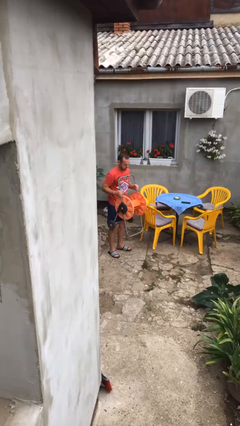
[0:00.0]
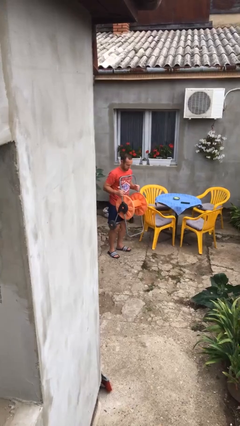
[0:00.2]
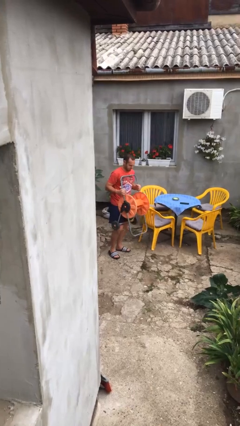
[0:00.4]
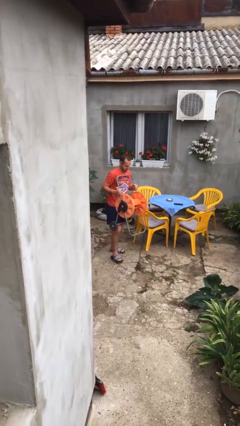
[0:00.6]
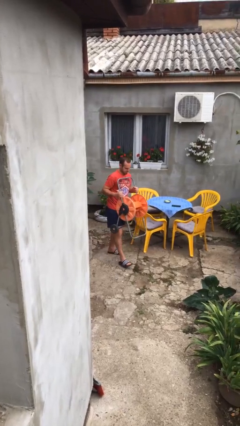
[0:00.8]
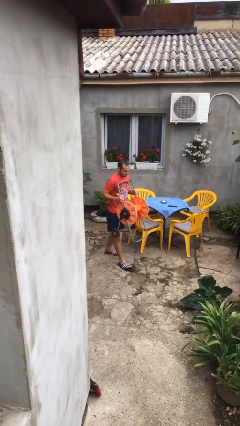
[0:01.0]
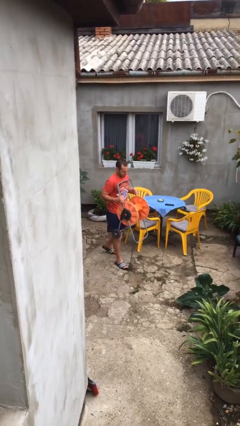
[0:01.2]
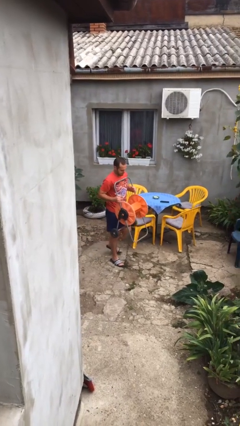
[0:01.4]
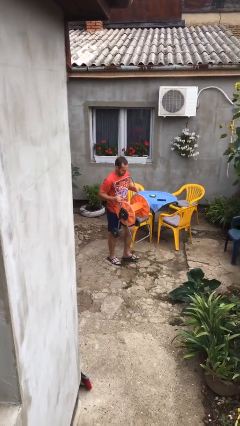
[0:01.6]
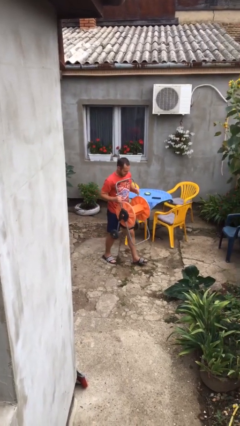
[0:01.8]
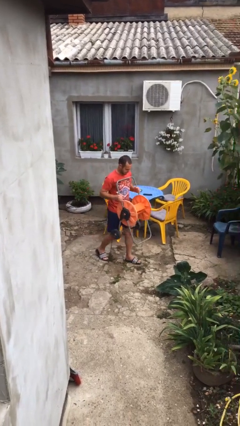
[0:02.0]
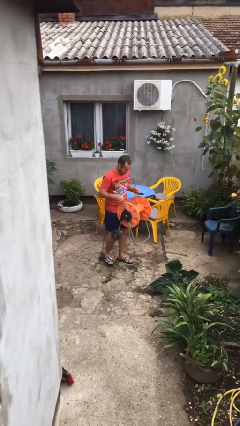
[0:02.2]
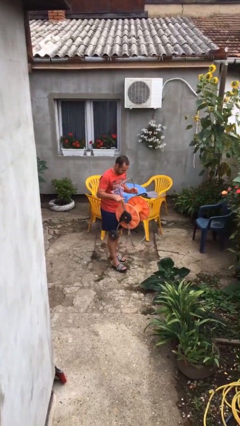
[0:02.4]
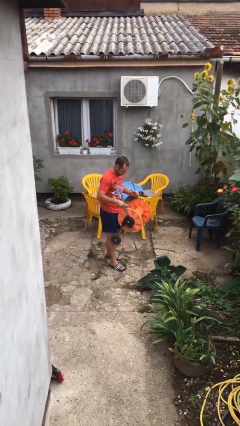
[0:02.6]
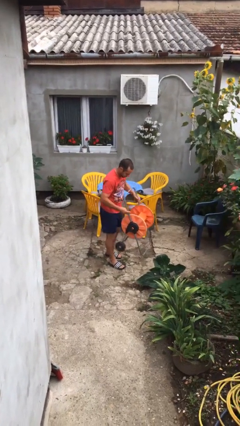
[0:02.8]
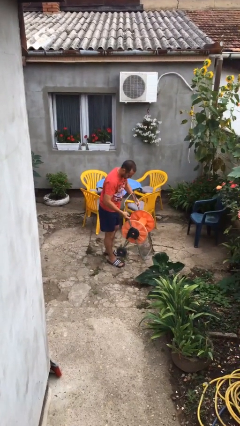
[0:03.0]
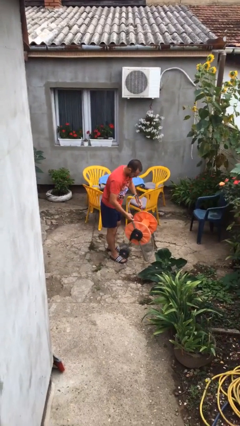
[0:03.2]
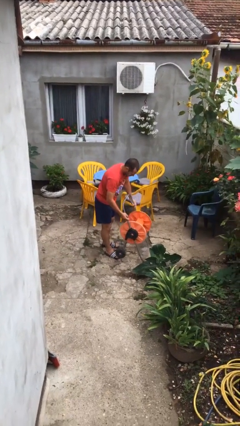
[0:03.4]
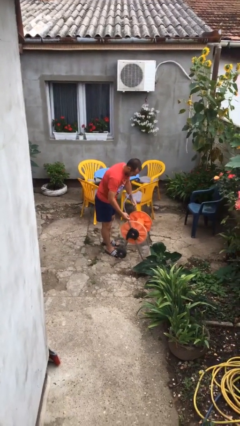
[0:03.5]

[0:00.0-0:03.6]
person carries heavy object

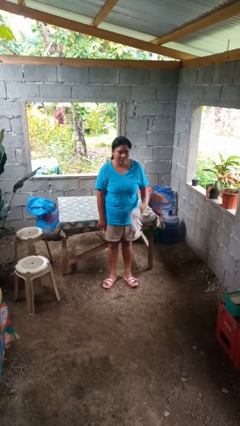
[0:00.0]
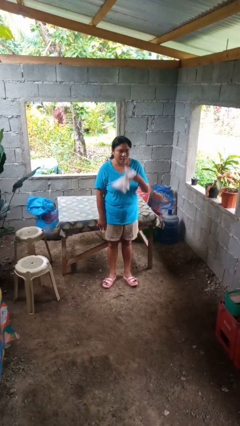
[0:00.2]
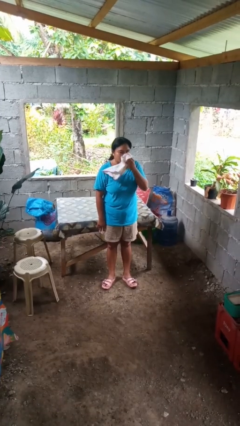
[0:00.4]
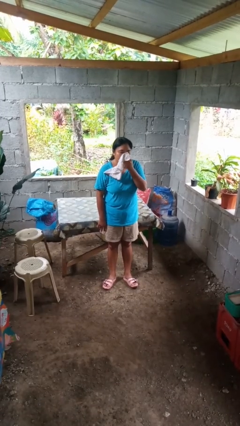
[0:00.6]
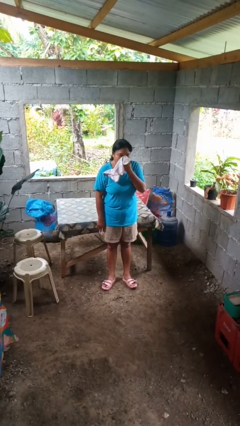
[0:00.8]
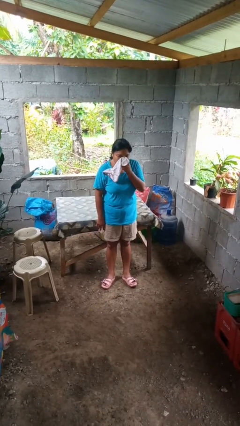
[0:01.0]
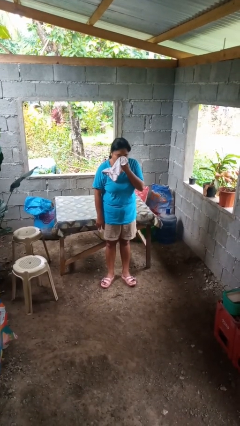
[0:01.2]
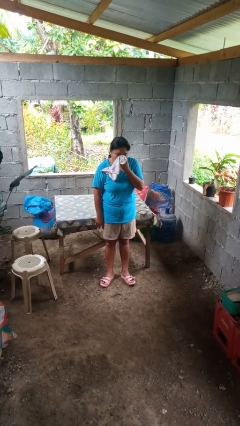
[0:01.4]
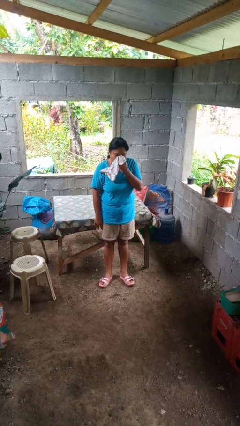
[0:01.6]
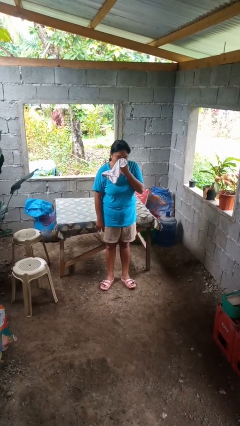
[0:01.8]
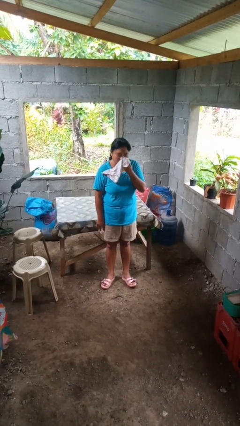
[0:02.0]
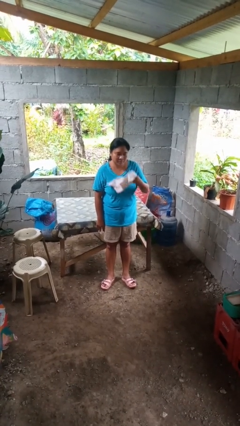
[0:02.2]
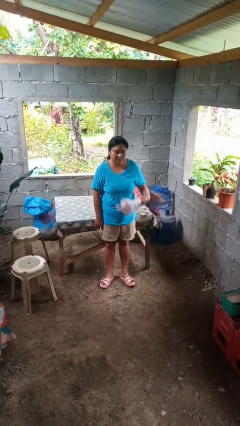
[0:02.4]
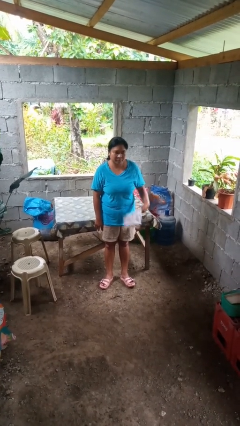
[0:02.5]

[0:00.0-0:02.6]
person blows nose

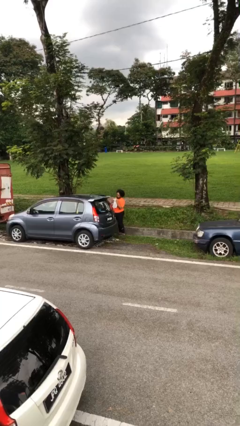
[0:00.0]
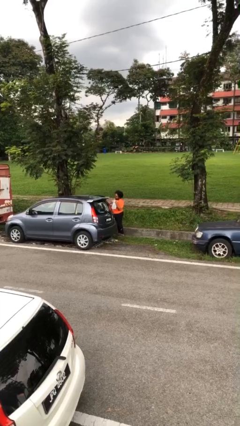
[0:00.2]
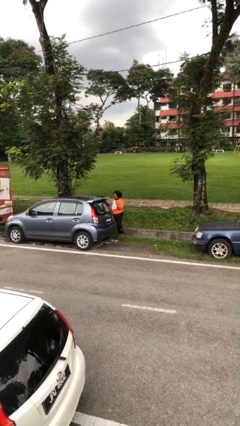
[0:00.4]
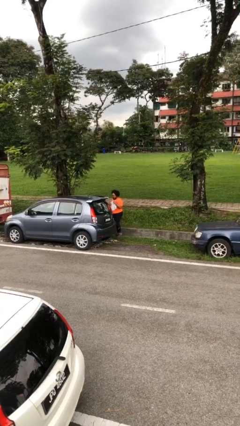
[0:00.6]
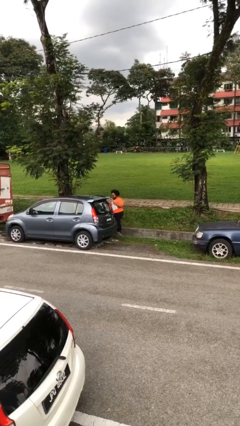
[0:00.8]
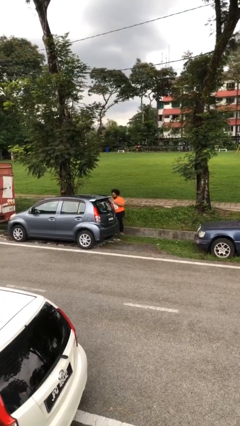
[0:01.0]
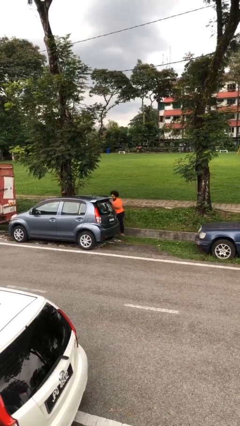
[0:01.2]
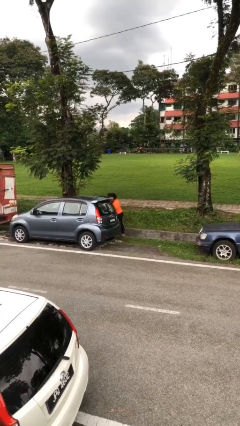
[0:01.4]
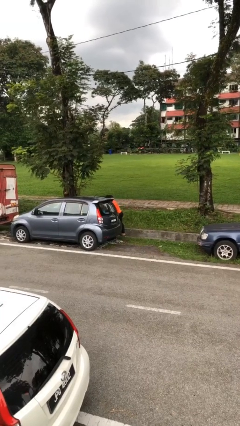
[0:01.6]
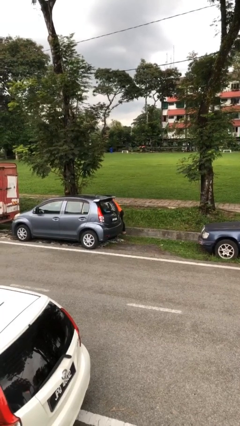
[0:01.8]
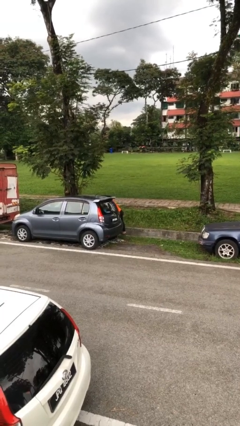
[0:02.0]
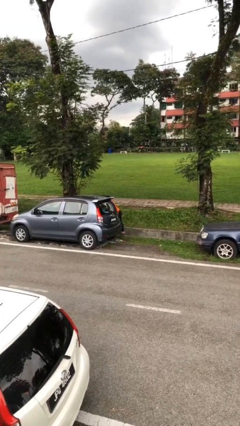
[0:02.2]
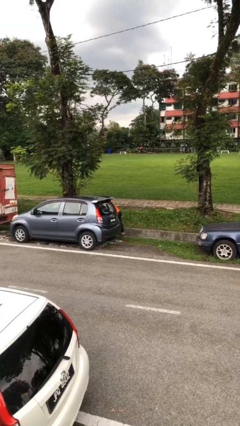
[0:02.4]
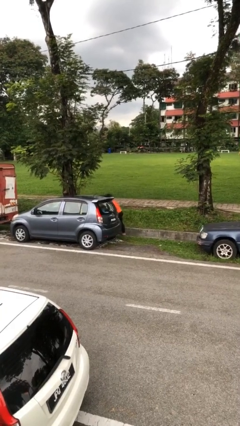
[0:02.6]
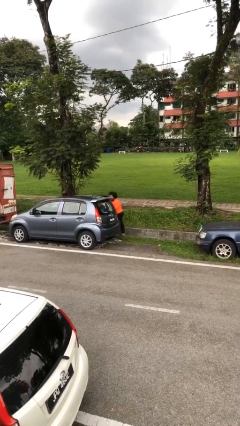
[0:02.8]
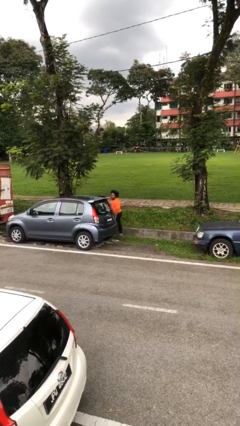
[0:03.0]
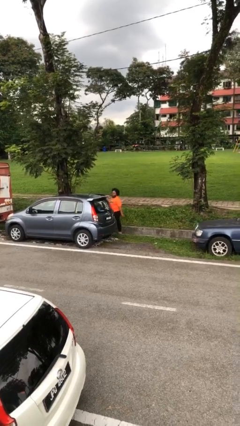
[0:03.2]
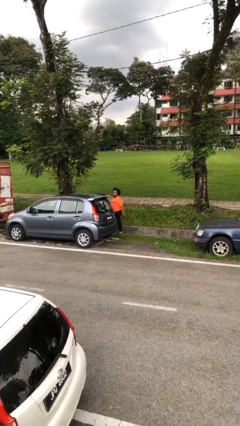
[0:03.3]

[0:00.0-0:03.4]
person loads car

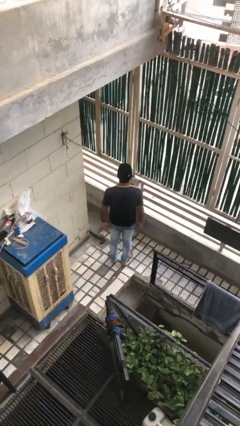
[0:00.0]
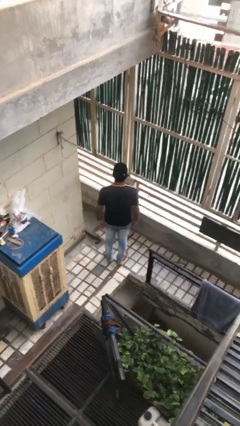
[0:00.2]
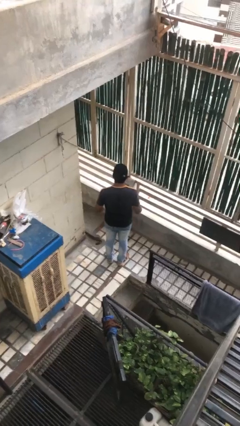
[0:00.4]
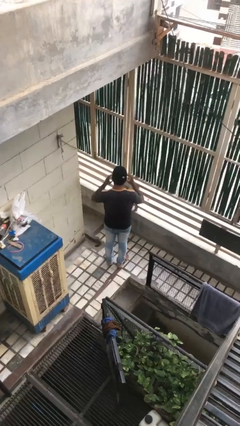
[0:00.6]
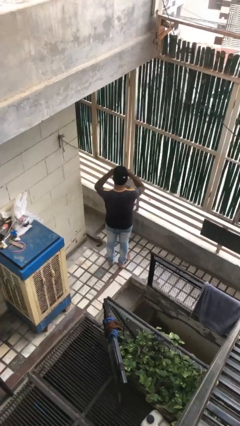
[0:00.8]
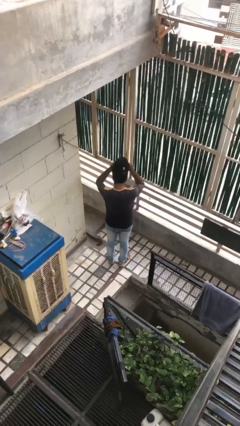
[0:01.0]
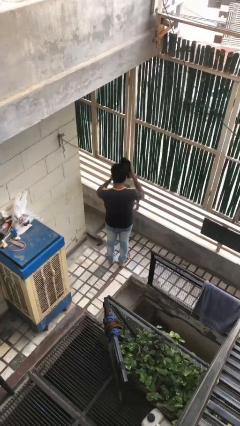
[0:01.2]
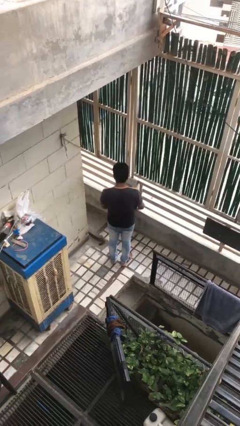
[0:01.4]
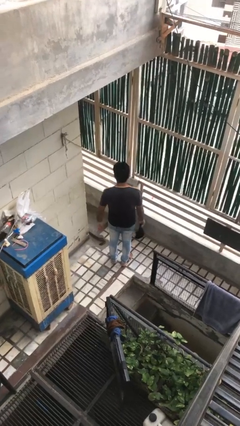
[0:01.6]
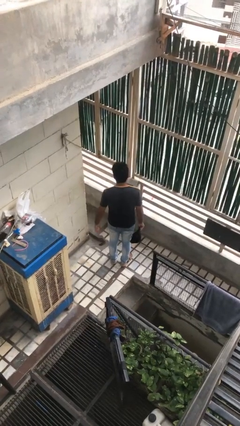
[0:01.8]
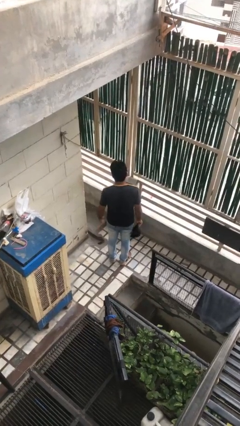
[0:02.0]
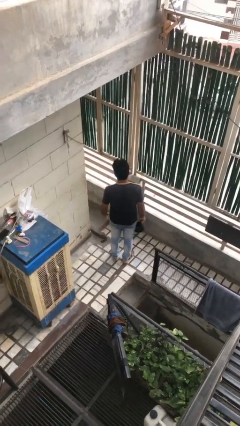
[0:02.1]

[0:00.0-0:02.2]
person takes off hat

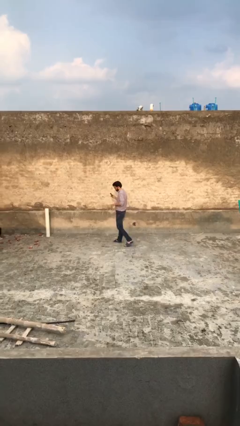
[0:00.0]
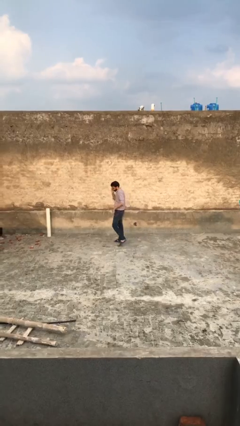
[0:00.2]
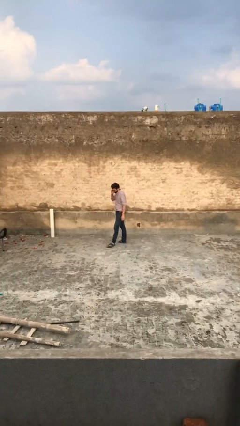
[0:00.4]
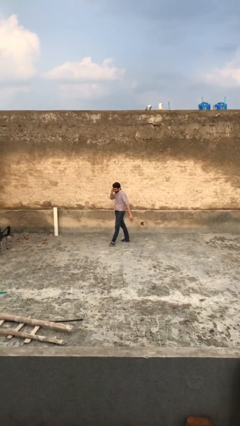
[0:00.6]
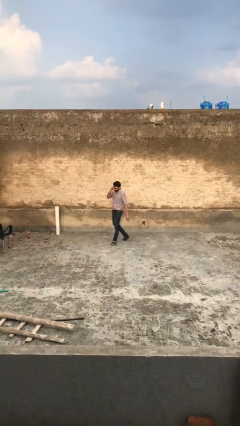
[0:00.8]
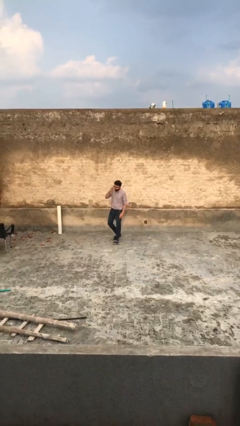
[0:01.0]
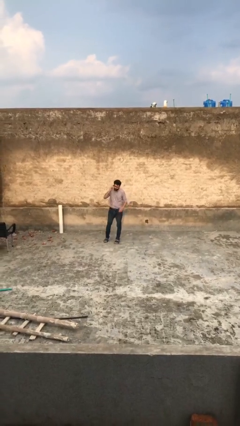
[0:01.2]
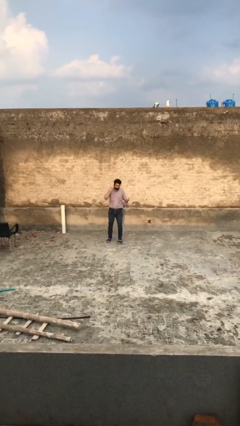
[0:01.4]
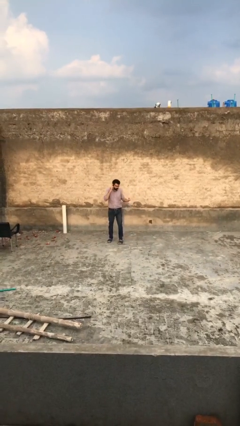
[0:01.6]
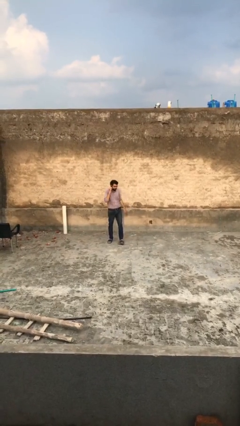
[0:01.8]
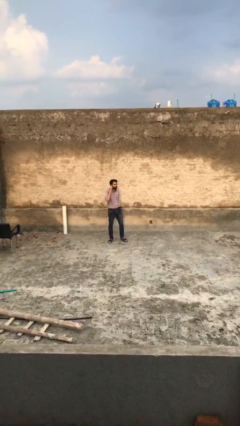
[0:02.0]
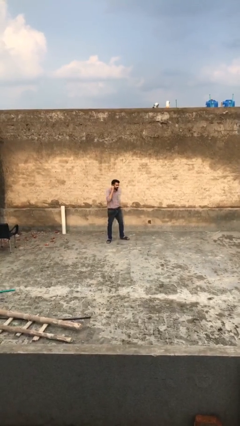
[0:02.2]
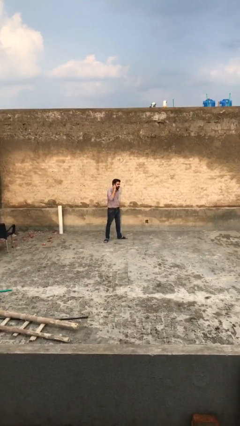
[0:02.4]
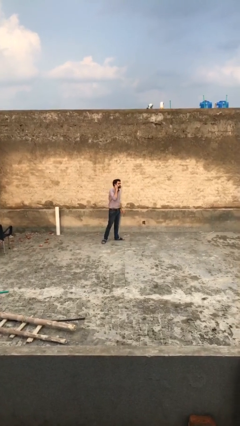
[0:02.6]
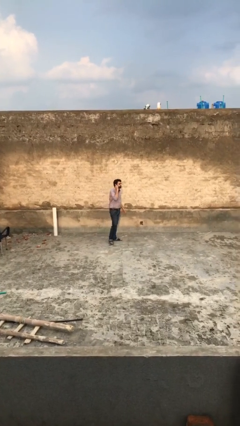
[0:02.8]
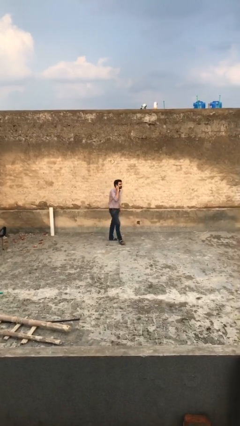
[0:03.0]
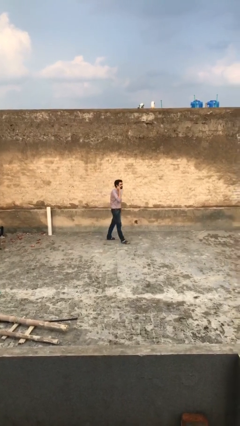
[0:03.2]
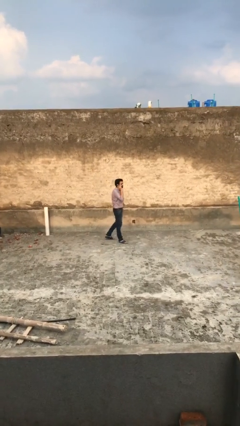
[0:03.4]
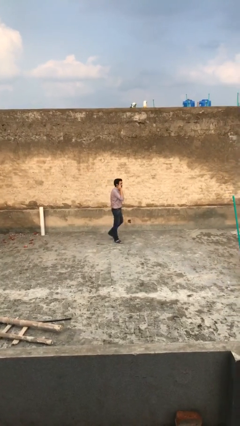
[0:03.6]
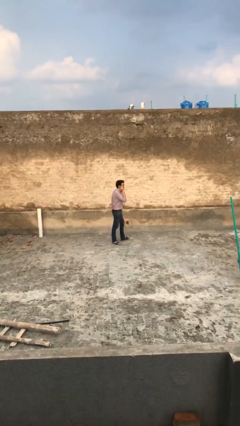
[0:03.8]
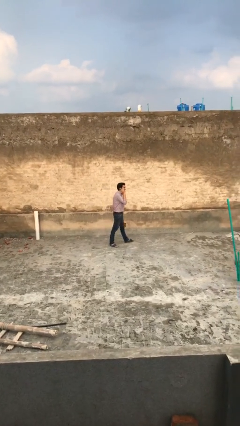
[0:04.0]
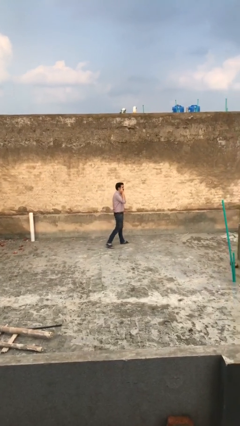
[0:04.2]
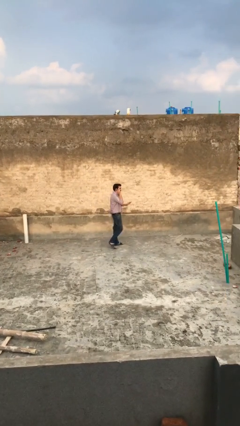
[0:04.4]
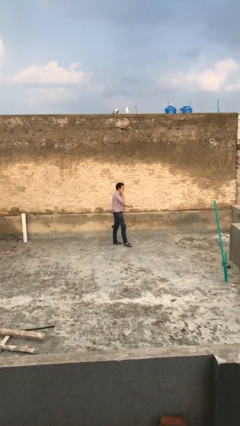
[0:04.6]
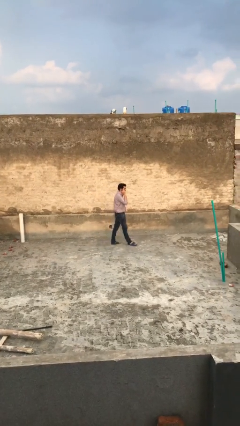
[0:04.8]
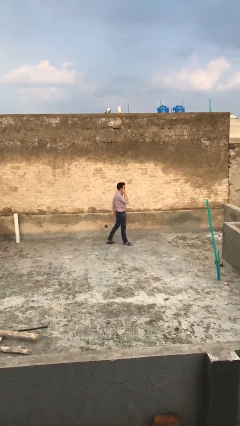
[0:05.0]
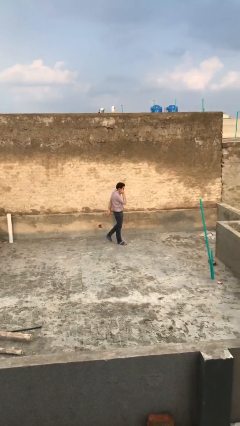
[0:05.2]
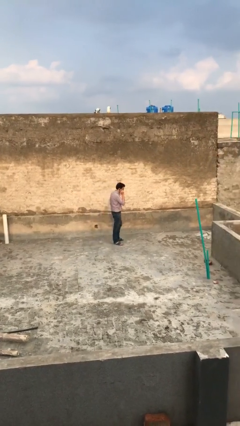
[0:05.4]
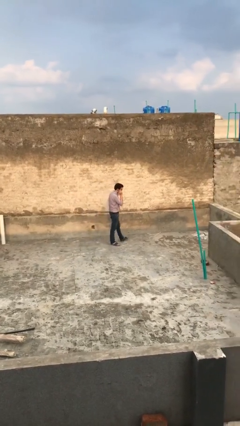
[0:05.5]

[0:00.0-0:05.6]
person talks on phone

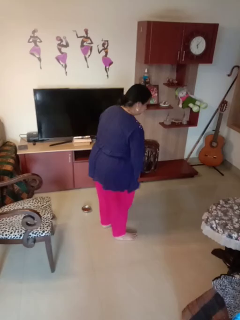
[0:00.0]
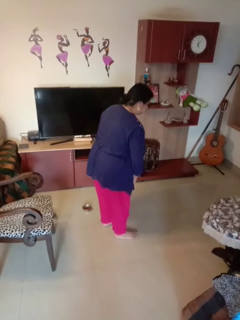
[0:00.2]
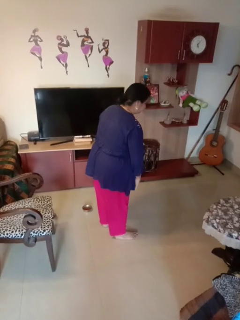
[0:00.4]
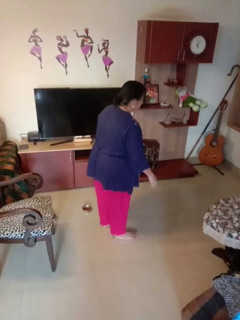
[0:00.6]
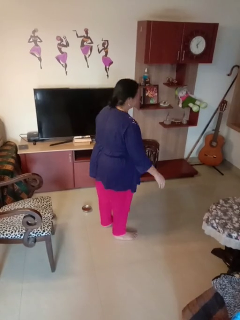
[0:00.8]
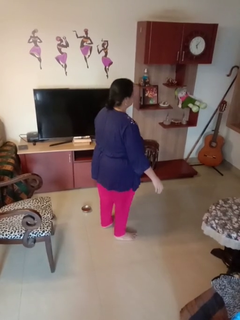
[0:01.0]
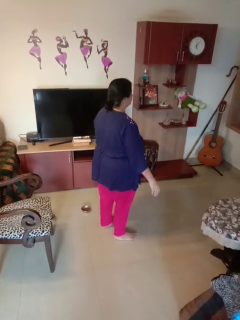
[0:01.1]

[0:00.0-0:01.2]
person slaps hands on thighs
